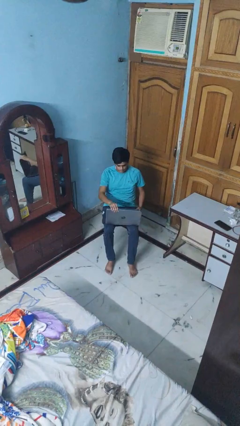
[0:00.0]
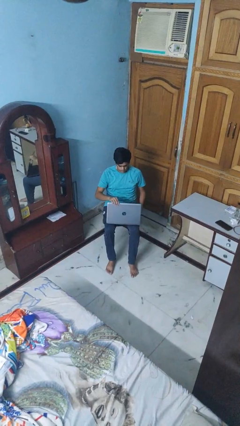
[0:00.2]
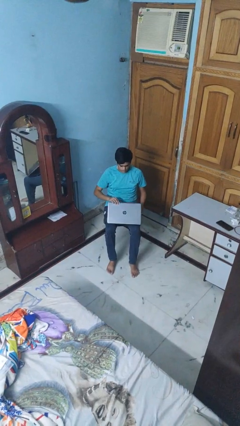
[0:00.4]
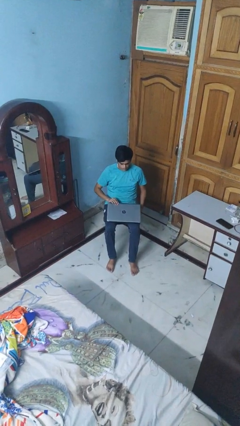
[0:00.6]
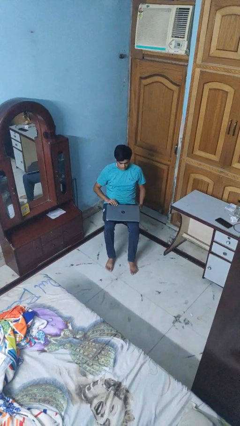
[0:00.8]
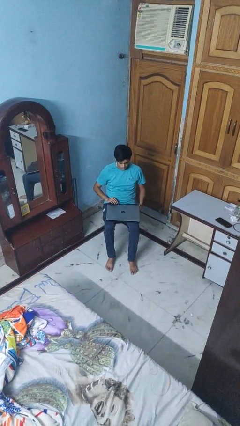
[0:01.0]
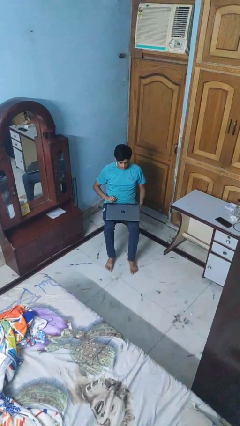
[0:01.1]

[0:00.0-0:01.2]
person closes laptop

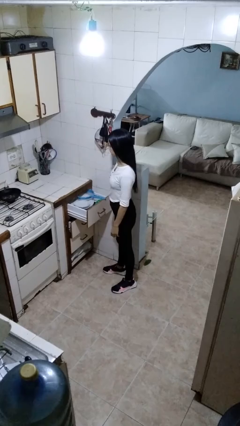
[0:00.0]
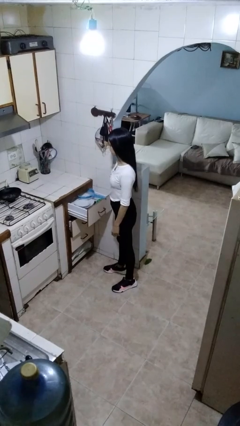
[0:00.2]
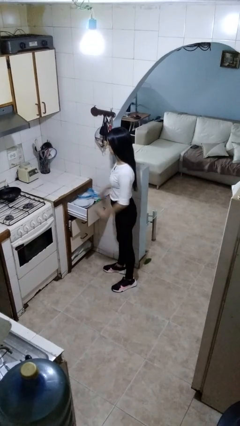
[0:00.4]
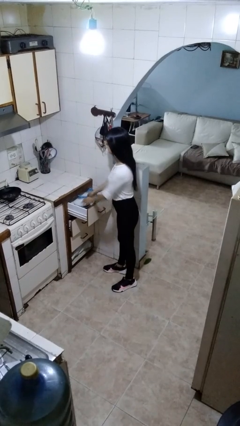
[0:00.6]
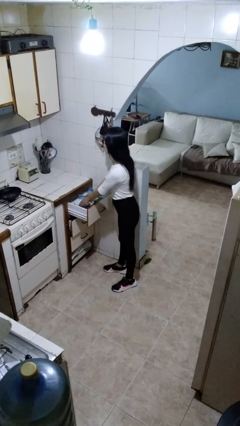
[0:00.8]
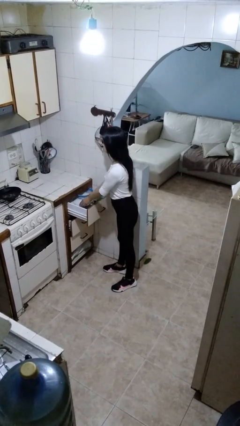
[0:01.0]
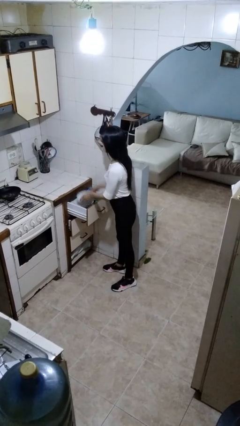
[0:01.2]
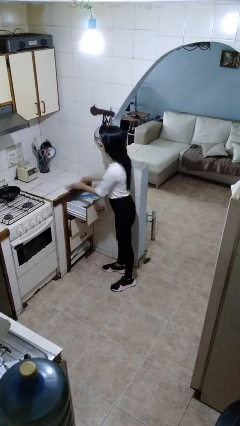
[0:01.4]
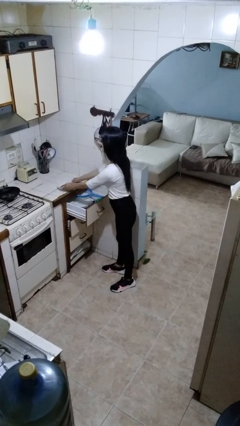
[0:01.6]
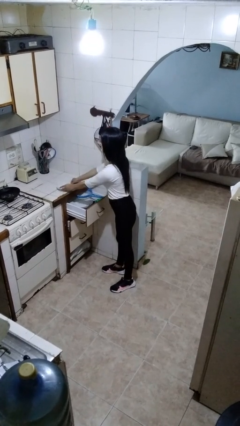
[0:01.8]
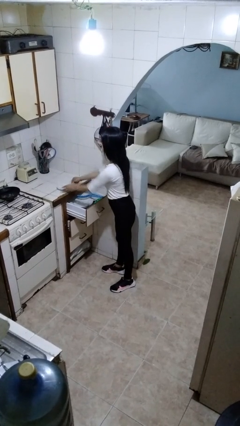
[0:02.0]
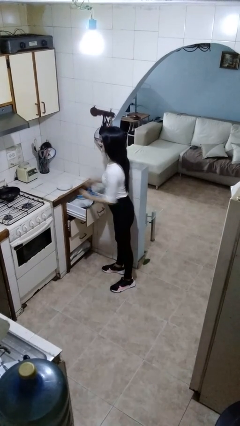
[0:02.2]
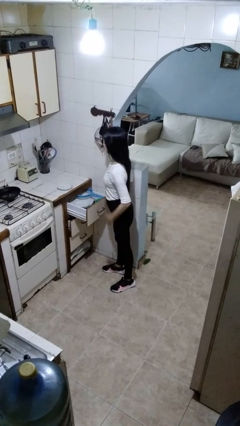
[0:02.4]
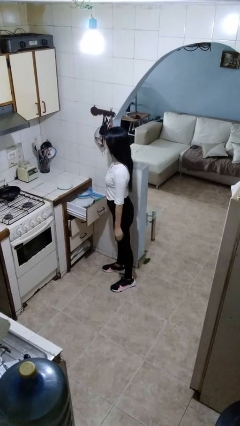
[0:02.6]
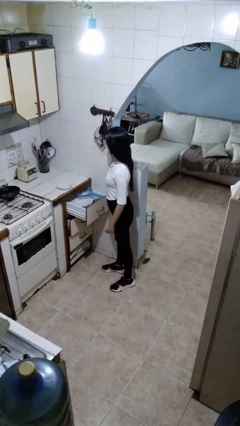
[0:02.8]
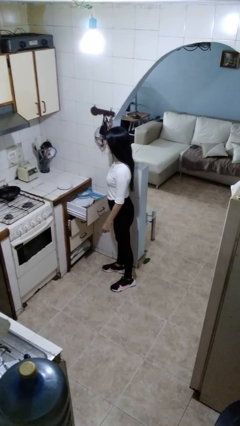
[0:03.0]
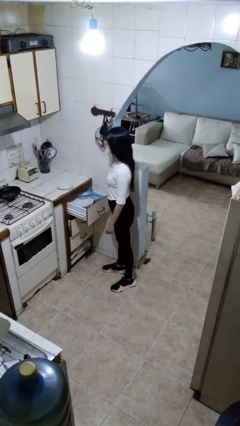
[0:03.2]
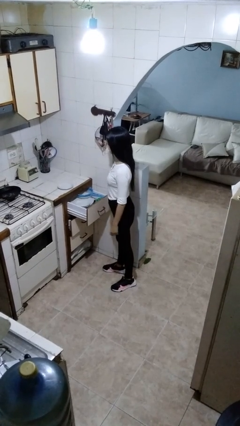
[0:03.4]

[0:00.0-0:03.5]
person takes object from kitchen drawer

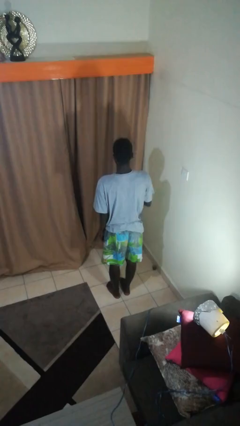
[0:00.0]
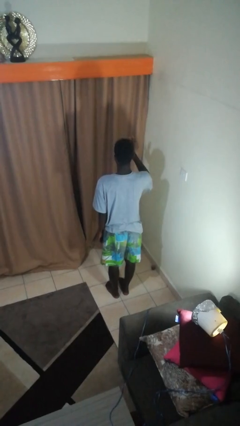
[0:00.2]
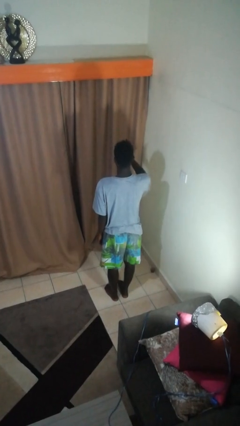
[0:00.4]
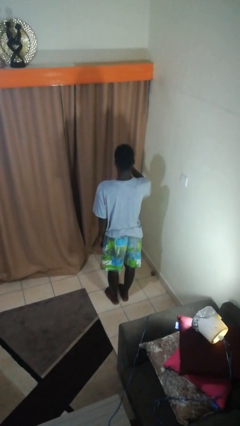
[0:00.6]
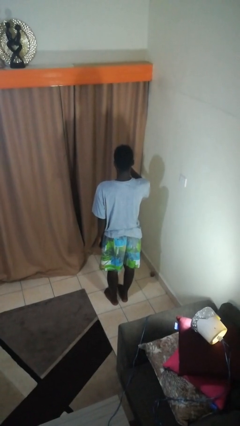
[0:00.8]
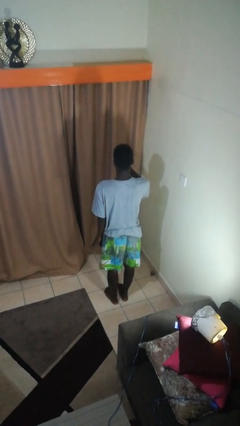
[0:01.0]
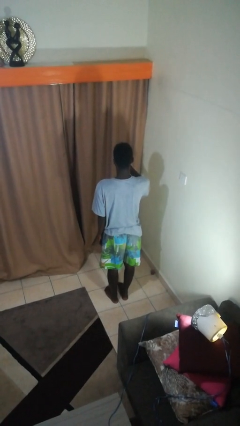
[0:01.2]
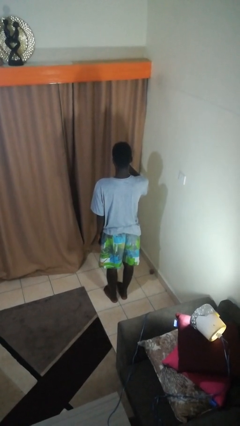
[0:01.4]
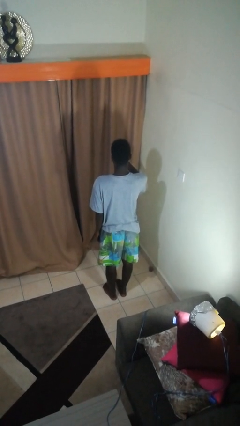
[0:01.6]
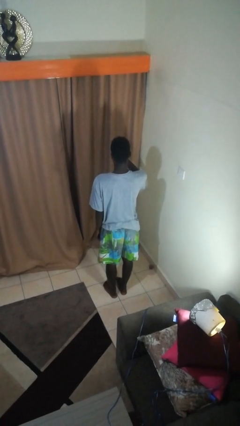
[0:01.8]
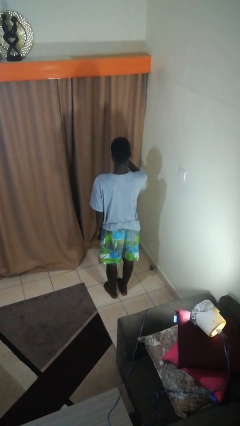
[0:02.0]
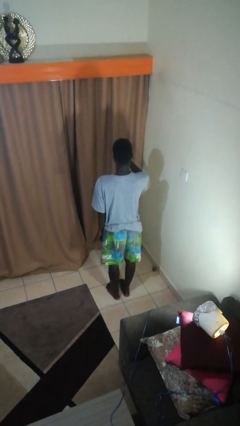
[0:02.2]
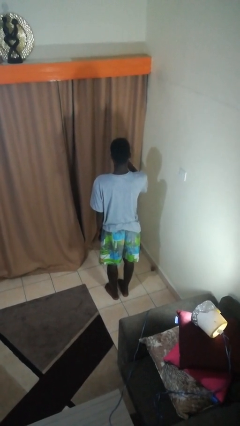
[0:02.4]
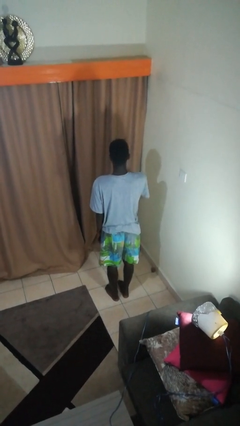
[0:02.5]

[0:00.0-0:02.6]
person gestures number four

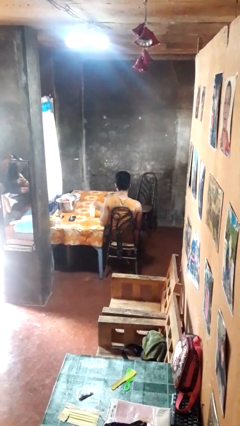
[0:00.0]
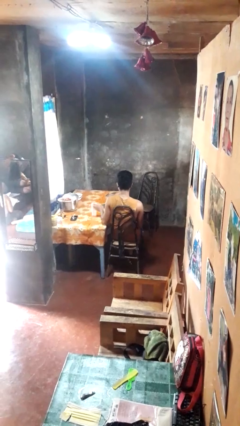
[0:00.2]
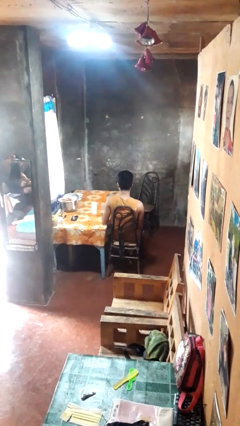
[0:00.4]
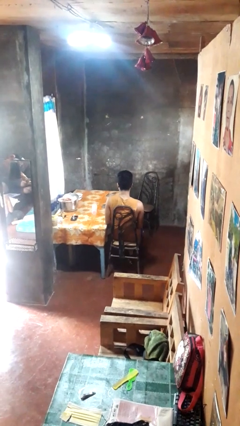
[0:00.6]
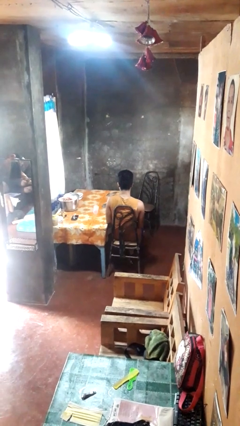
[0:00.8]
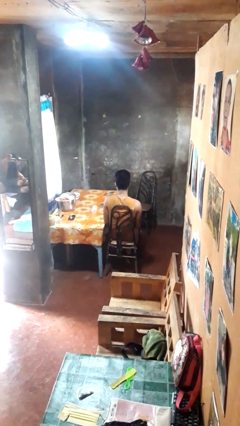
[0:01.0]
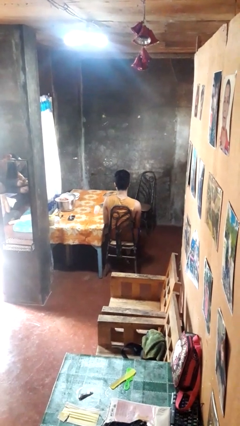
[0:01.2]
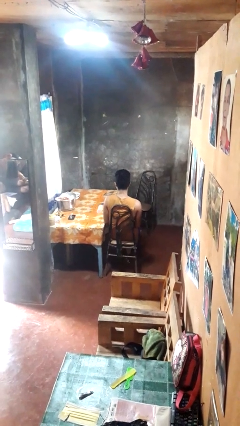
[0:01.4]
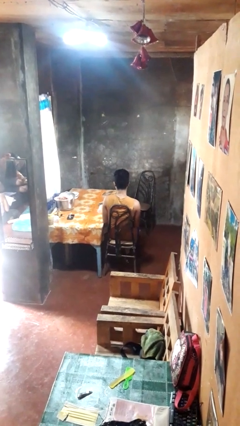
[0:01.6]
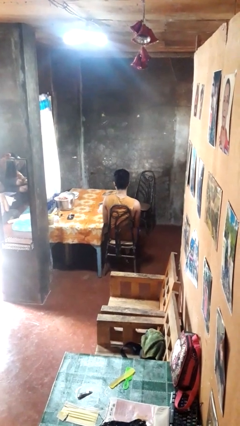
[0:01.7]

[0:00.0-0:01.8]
person knocks over glass

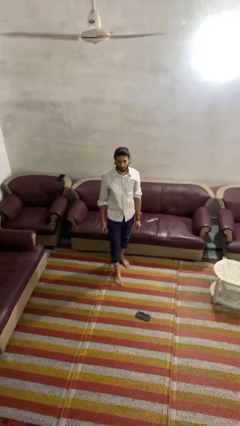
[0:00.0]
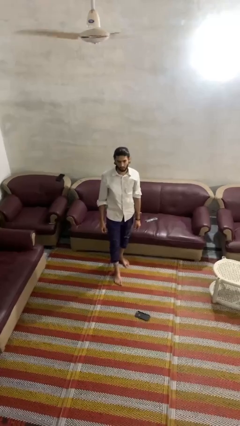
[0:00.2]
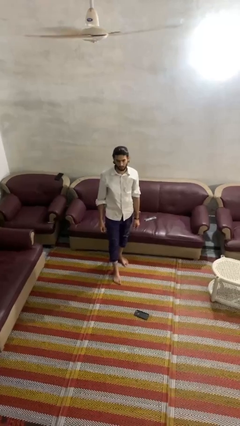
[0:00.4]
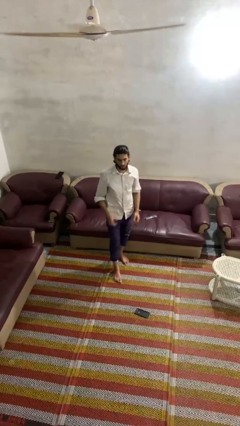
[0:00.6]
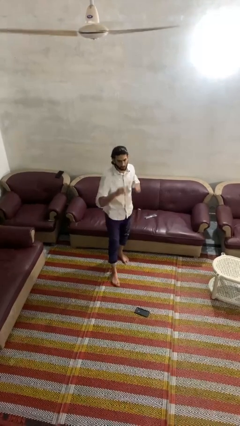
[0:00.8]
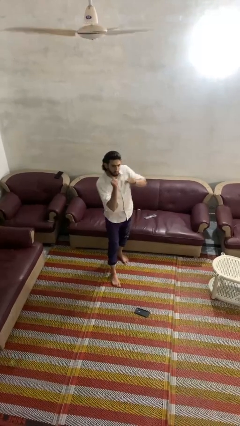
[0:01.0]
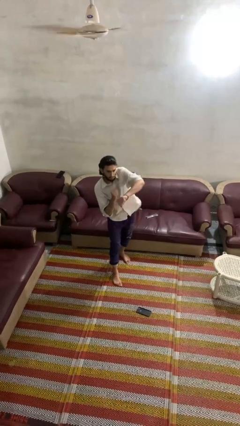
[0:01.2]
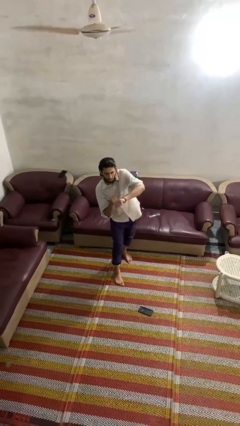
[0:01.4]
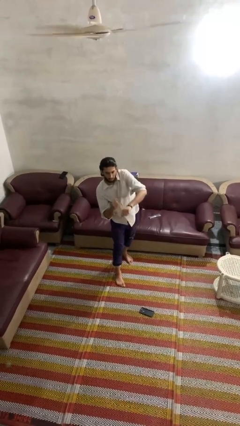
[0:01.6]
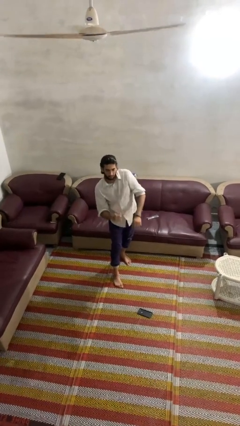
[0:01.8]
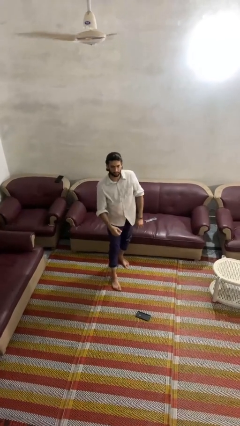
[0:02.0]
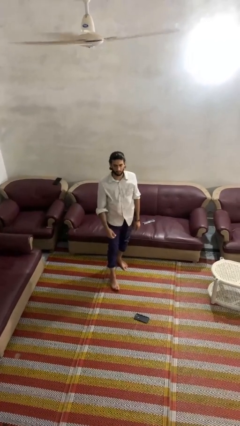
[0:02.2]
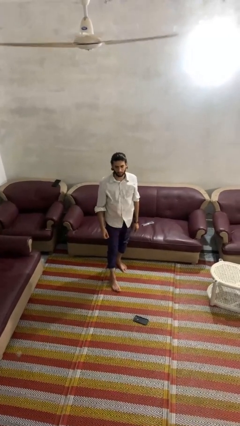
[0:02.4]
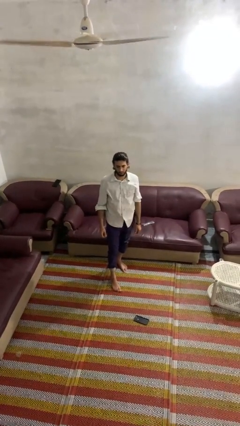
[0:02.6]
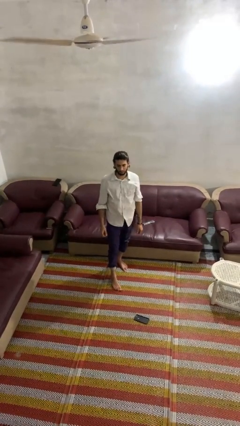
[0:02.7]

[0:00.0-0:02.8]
person punches

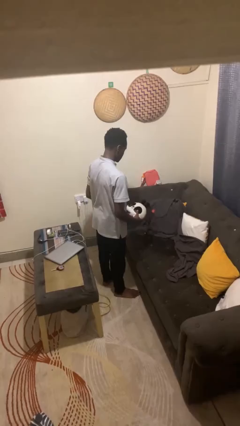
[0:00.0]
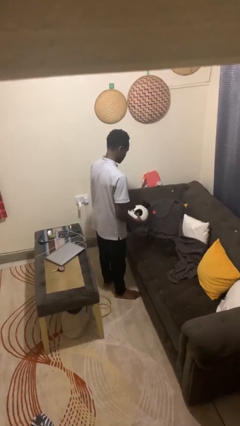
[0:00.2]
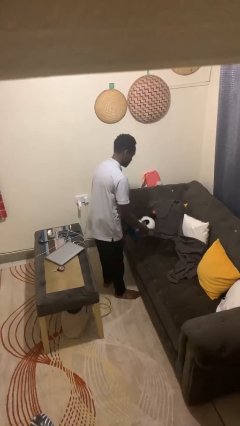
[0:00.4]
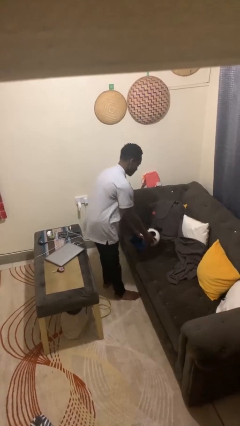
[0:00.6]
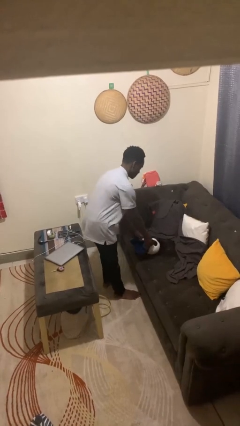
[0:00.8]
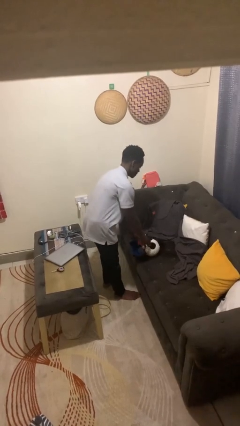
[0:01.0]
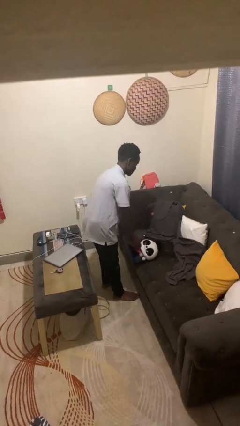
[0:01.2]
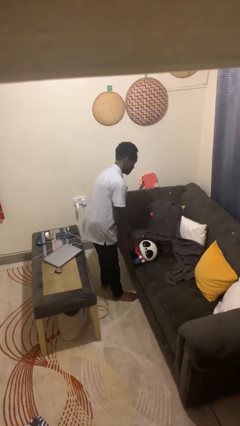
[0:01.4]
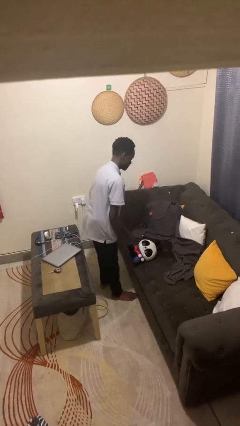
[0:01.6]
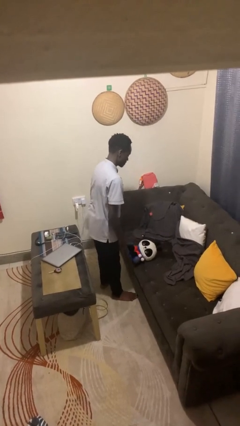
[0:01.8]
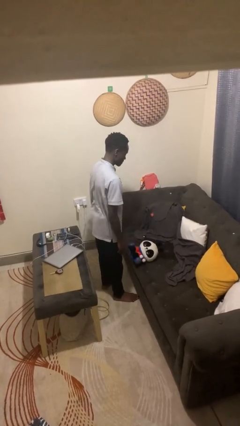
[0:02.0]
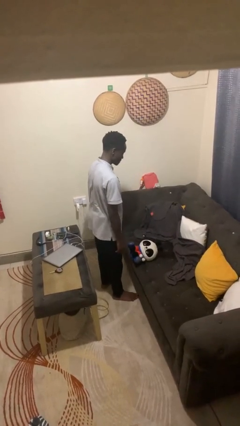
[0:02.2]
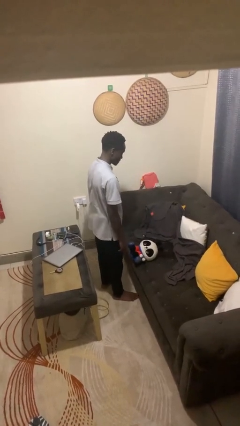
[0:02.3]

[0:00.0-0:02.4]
person puts down object on couch

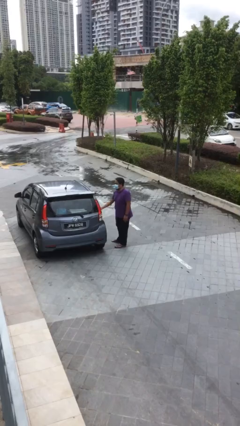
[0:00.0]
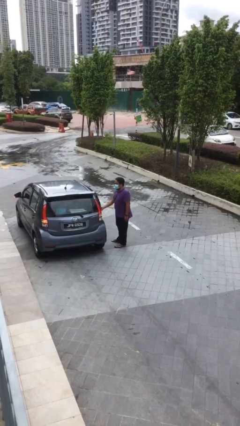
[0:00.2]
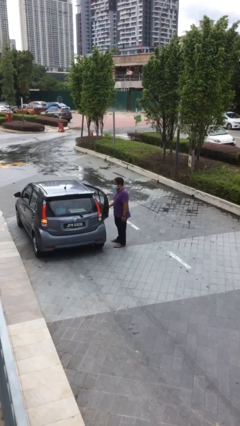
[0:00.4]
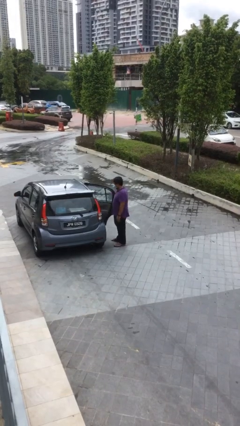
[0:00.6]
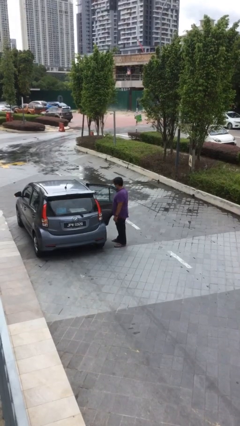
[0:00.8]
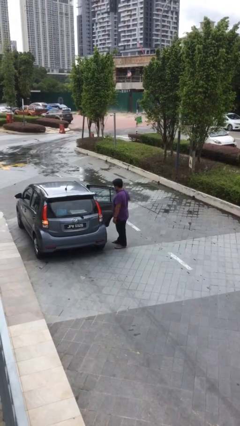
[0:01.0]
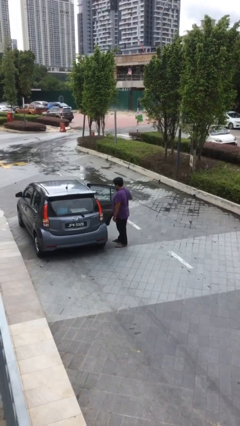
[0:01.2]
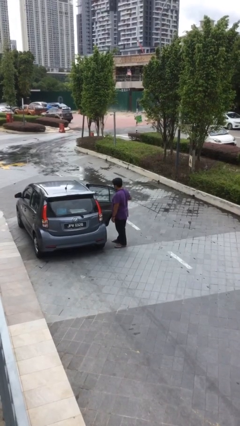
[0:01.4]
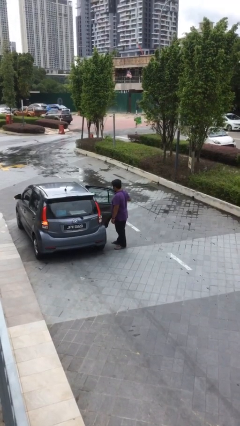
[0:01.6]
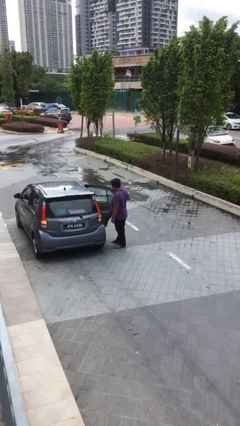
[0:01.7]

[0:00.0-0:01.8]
person opens car door

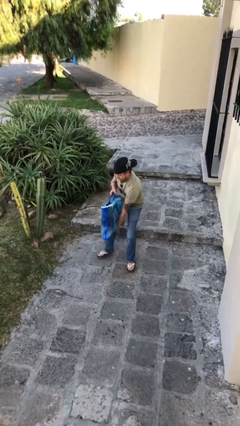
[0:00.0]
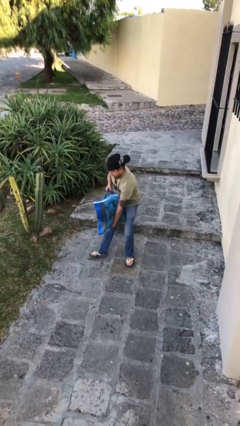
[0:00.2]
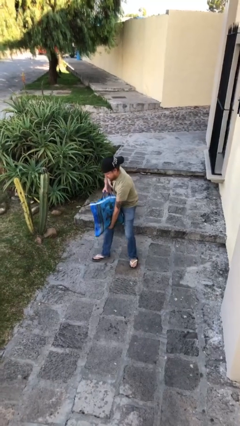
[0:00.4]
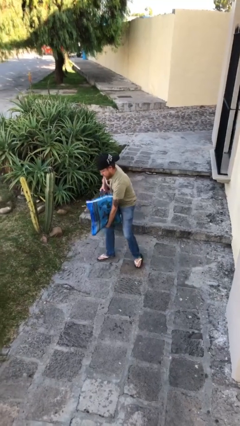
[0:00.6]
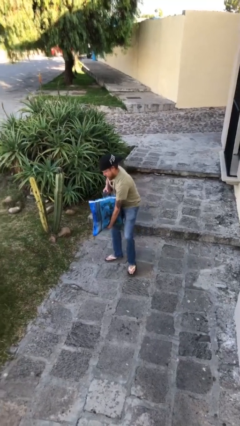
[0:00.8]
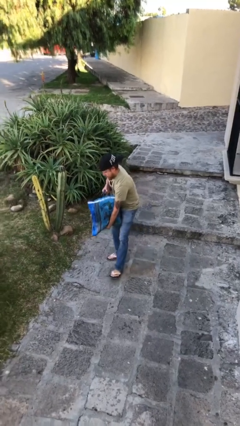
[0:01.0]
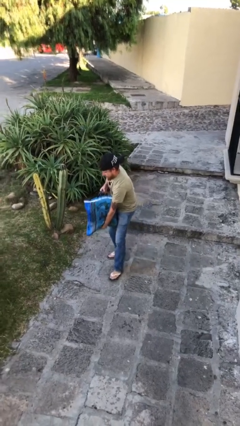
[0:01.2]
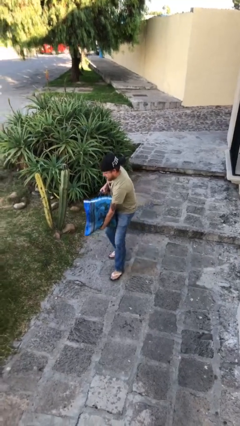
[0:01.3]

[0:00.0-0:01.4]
person carries heavy object
